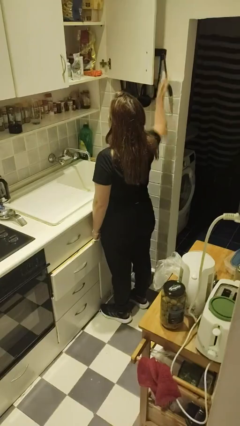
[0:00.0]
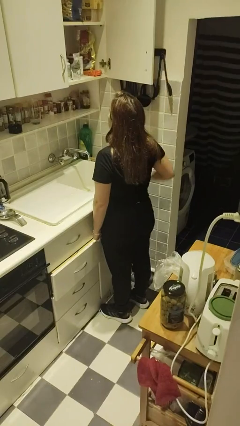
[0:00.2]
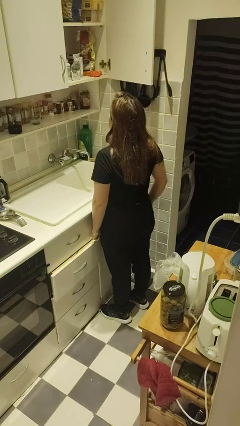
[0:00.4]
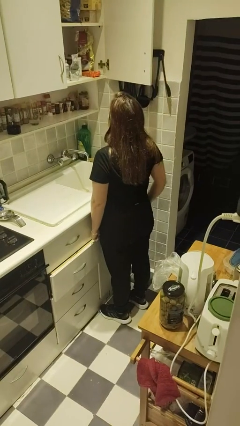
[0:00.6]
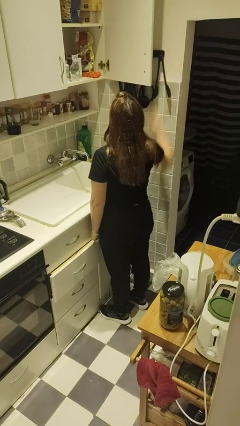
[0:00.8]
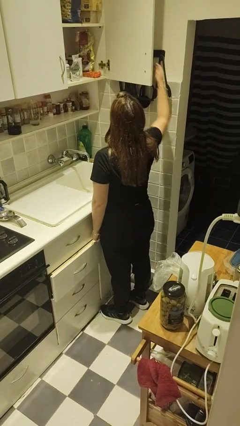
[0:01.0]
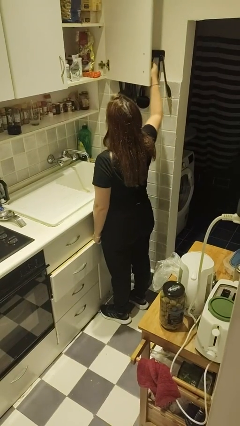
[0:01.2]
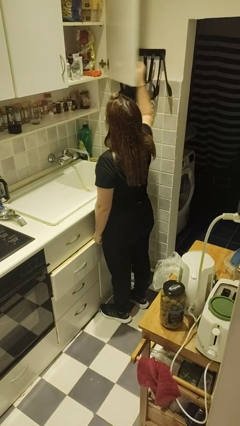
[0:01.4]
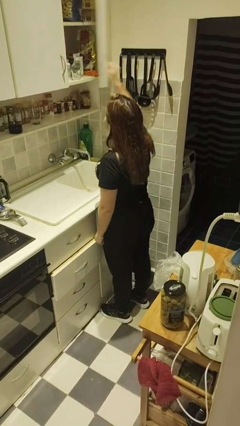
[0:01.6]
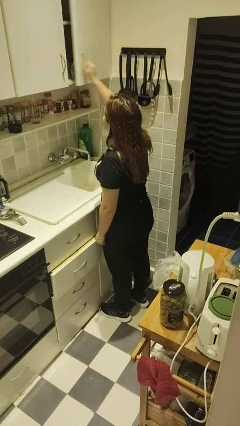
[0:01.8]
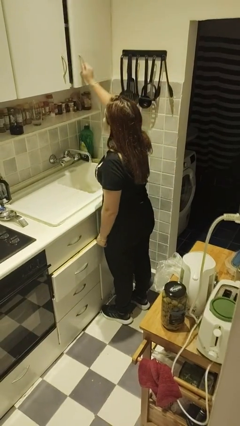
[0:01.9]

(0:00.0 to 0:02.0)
person closes cabinet

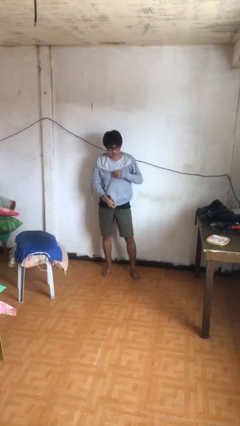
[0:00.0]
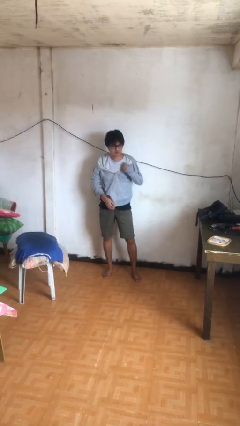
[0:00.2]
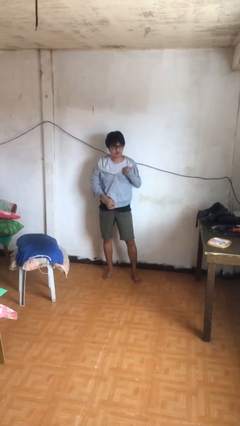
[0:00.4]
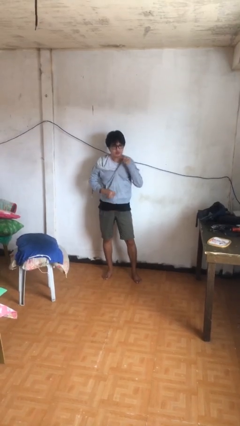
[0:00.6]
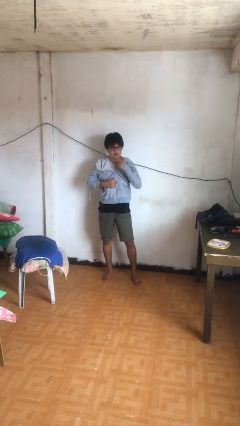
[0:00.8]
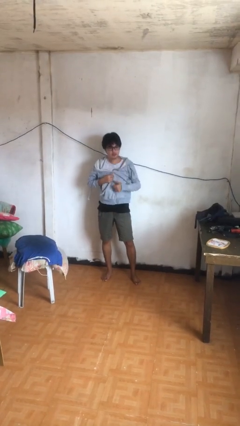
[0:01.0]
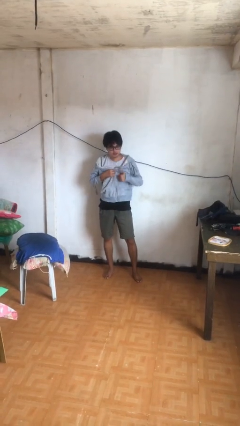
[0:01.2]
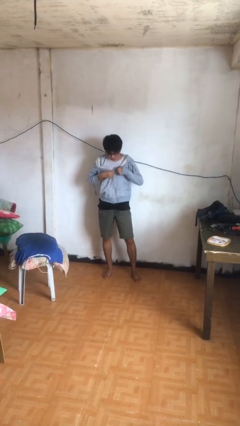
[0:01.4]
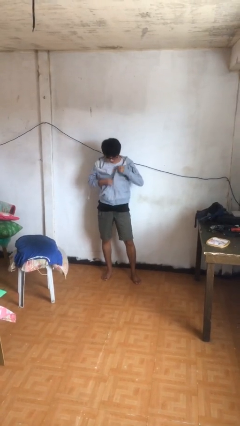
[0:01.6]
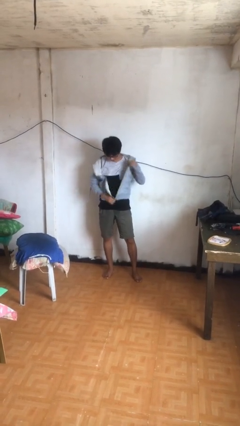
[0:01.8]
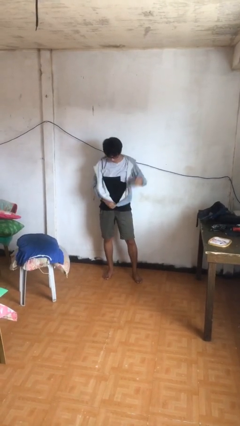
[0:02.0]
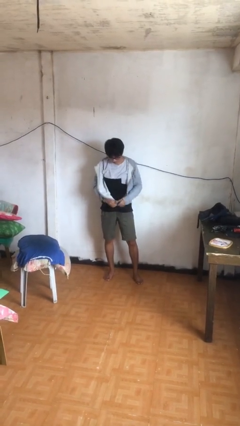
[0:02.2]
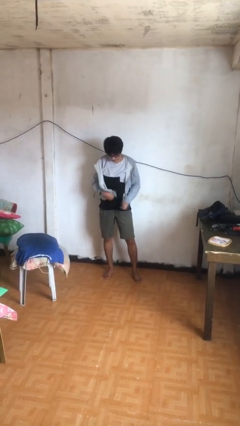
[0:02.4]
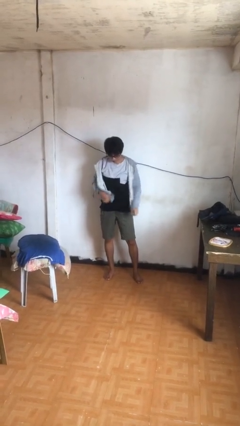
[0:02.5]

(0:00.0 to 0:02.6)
person unzips jacket

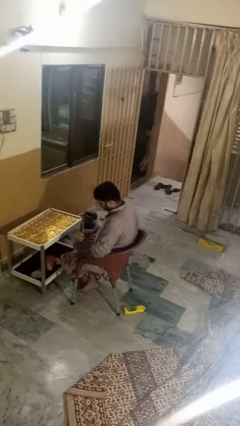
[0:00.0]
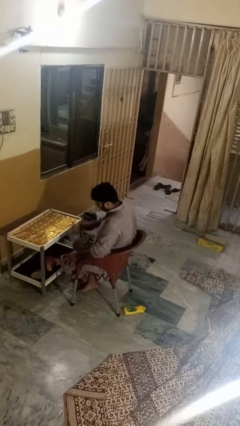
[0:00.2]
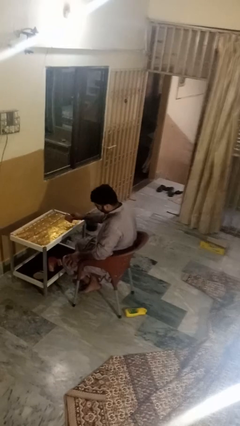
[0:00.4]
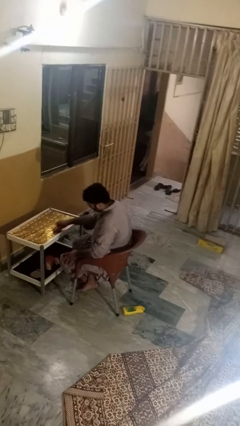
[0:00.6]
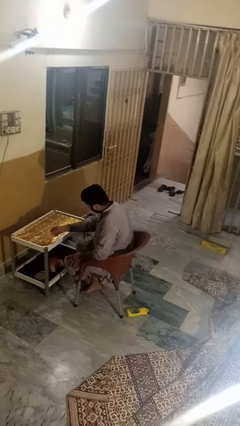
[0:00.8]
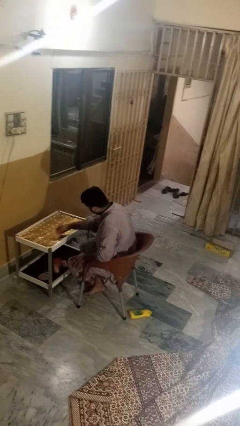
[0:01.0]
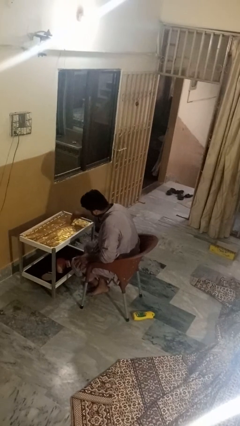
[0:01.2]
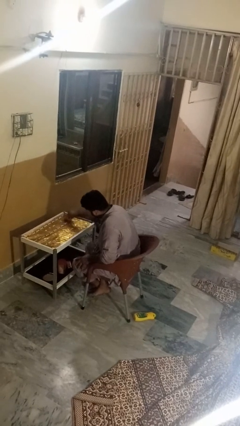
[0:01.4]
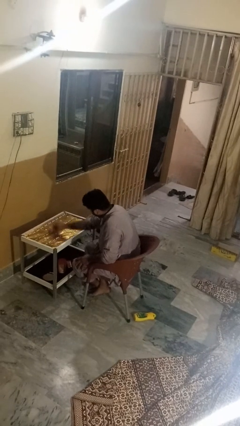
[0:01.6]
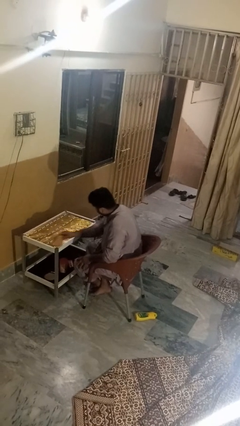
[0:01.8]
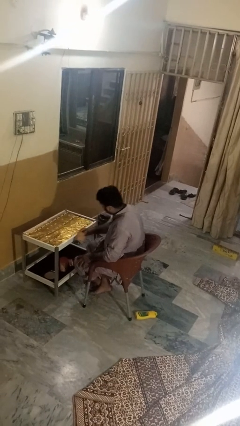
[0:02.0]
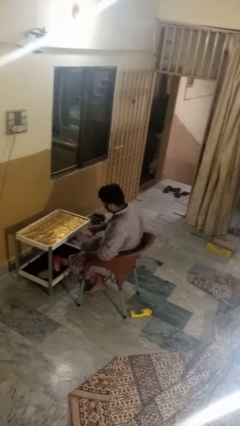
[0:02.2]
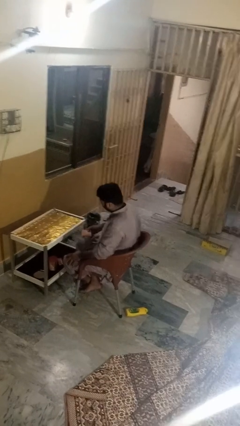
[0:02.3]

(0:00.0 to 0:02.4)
person cleans table with rag

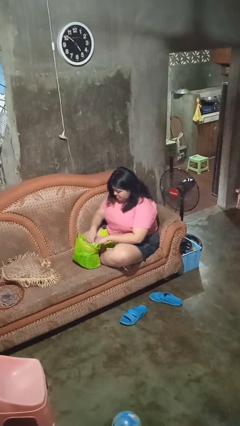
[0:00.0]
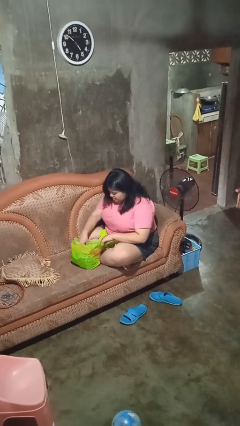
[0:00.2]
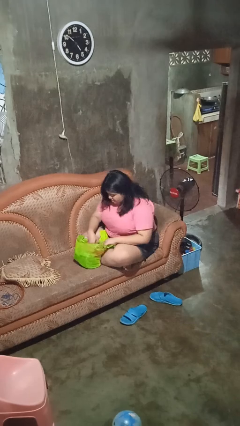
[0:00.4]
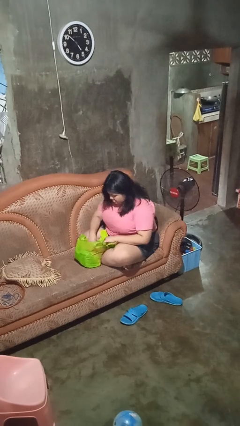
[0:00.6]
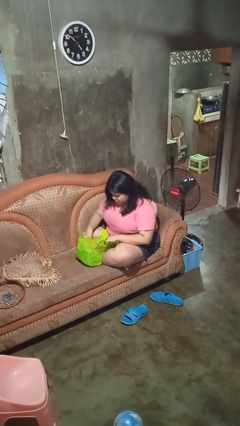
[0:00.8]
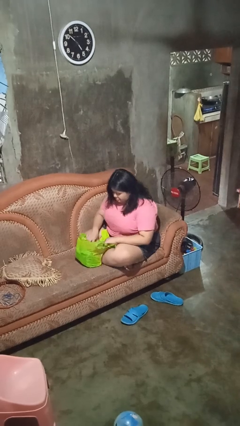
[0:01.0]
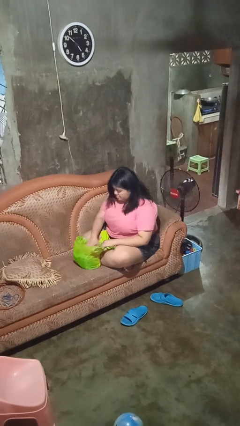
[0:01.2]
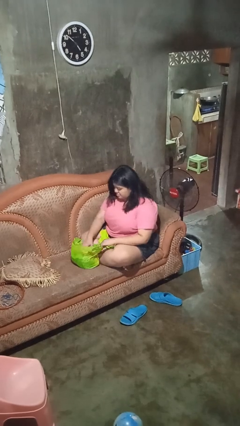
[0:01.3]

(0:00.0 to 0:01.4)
person searches in bag

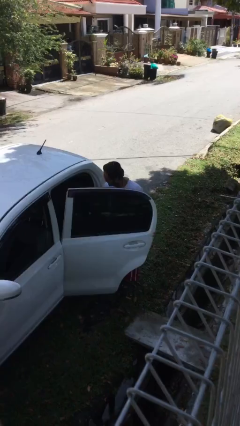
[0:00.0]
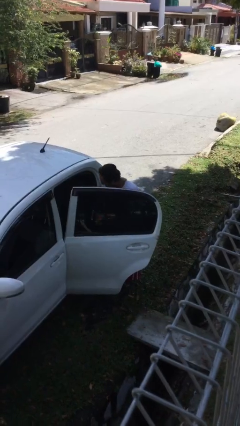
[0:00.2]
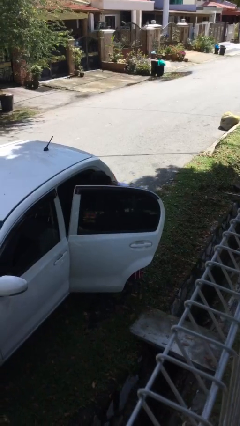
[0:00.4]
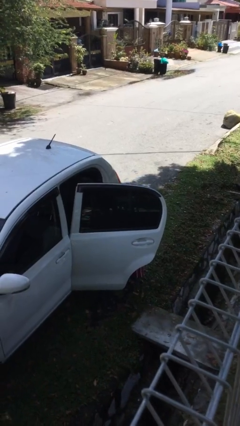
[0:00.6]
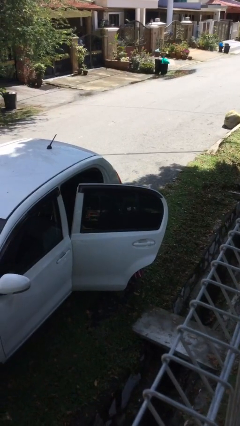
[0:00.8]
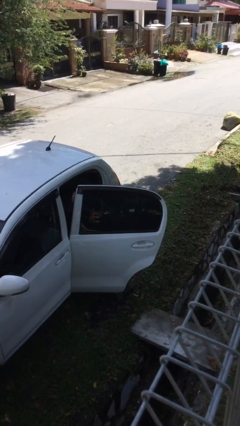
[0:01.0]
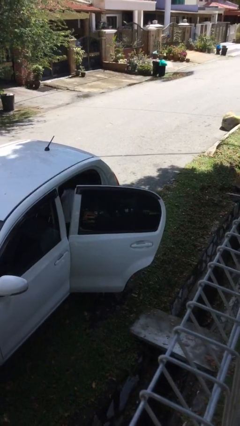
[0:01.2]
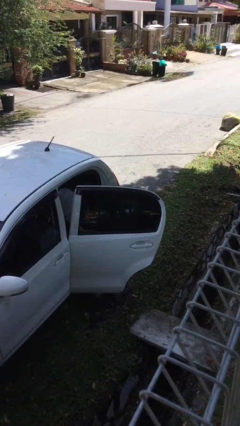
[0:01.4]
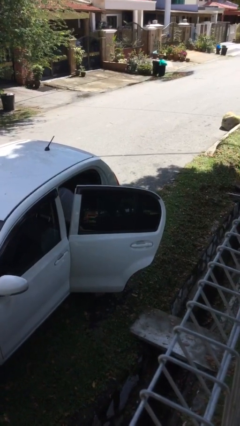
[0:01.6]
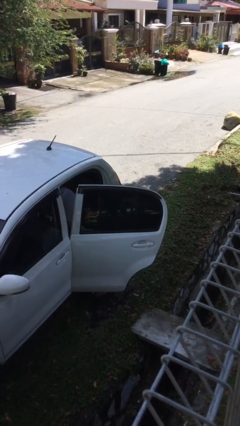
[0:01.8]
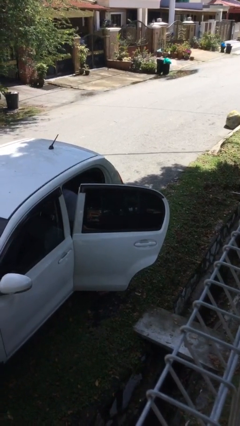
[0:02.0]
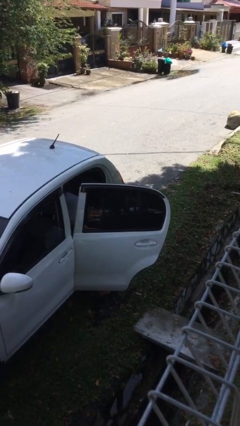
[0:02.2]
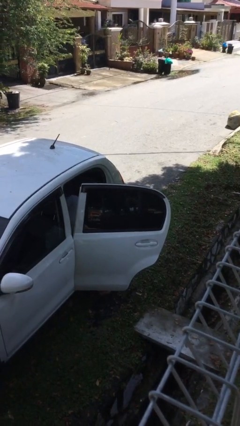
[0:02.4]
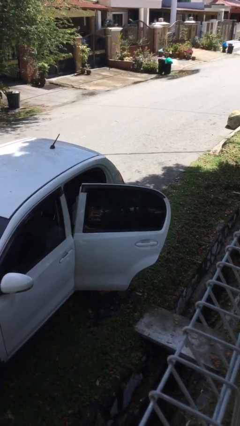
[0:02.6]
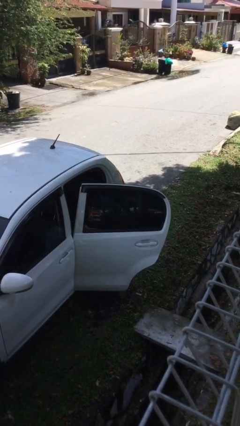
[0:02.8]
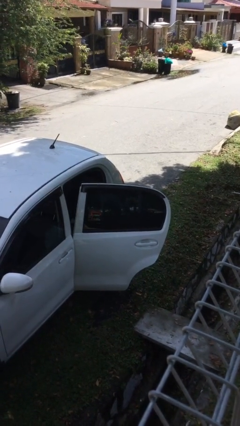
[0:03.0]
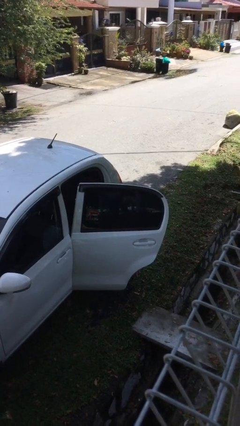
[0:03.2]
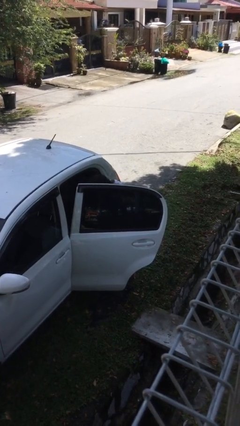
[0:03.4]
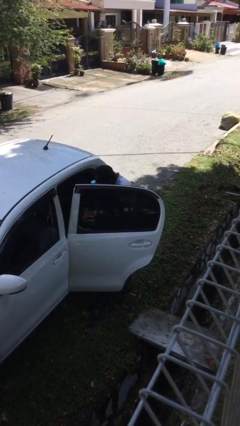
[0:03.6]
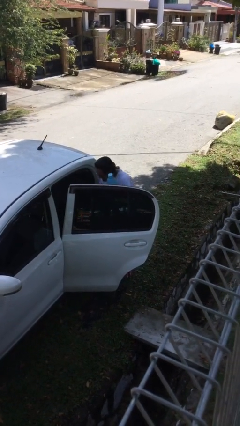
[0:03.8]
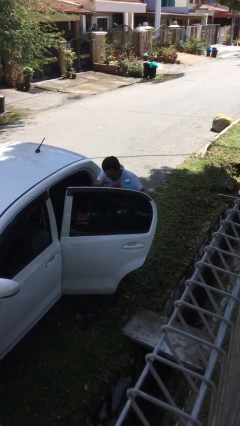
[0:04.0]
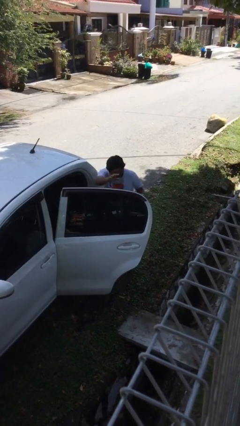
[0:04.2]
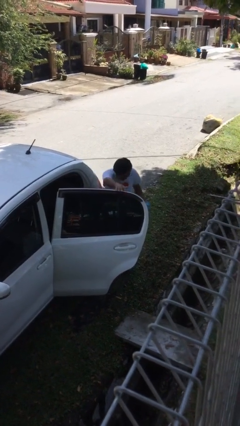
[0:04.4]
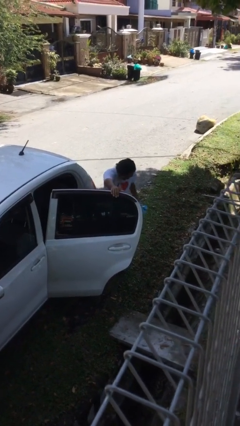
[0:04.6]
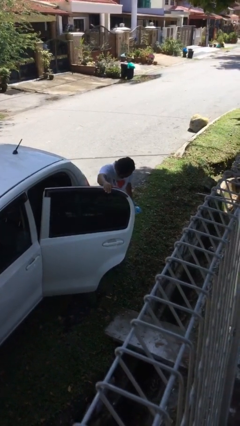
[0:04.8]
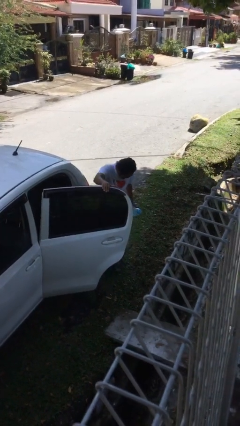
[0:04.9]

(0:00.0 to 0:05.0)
person unloads car

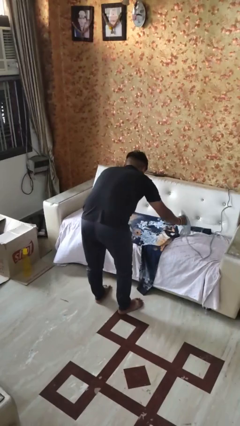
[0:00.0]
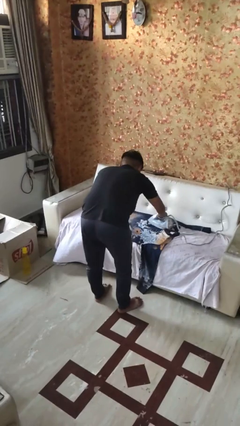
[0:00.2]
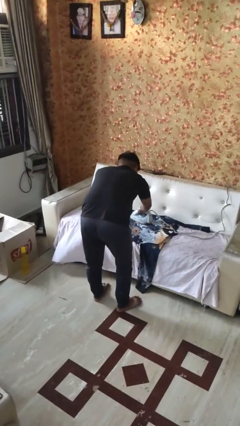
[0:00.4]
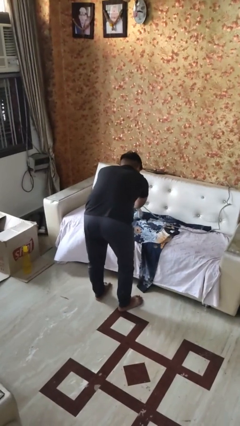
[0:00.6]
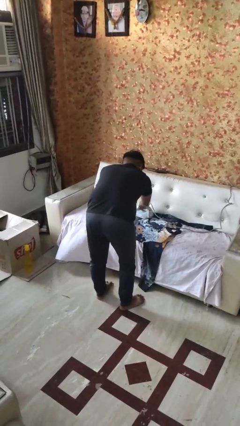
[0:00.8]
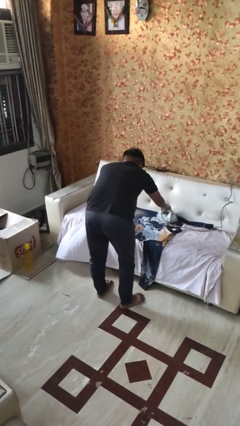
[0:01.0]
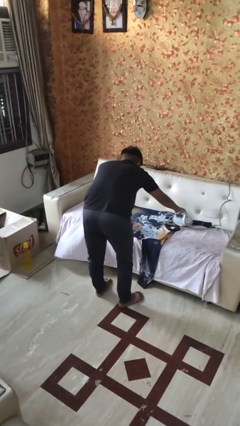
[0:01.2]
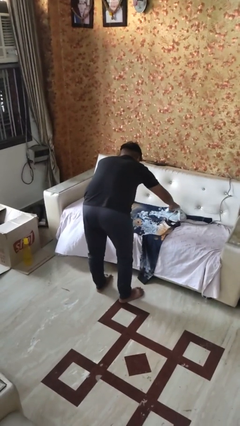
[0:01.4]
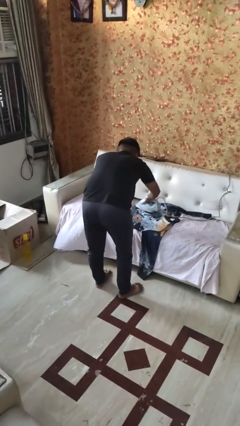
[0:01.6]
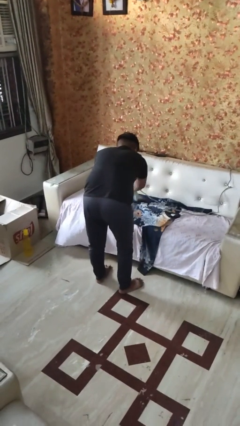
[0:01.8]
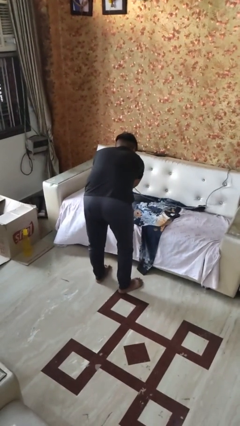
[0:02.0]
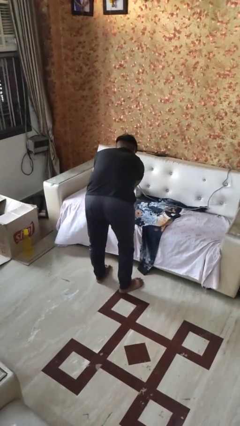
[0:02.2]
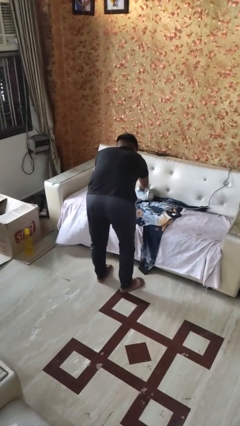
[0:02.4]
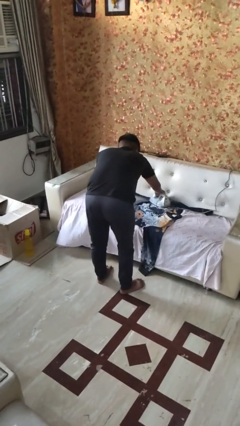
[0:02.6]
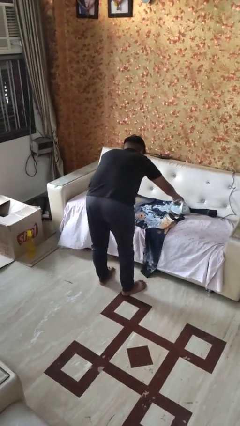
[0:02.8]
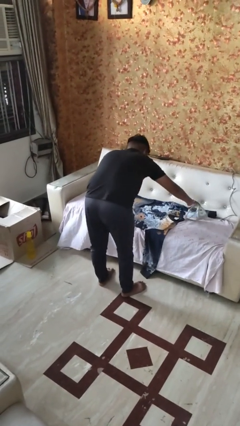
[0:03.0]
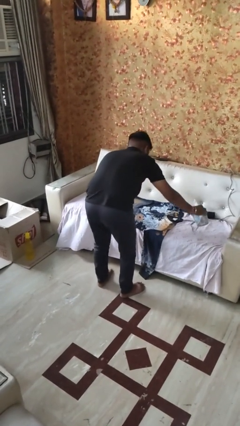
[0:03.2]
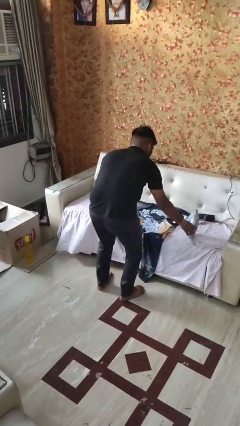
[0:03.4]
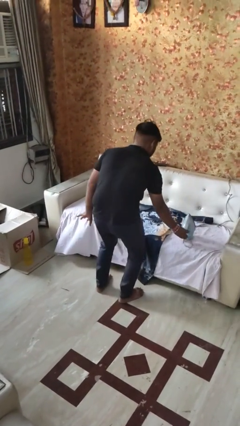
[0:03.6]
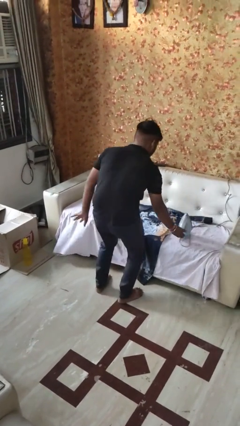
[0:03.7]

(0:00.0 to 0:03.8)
person irons clothes

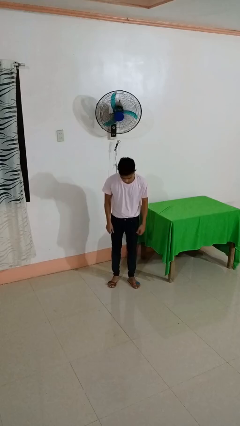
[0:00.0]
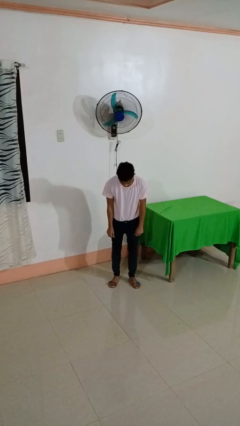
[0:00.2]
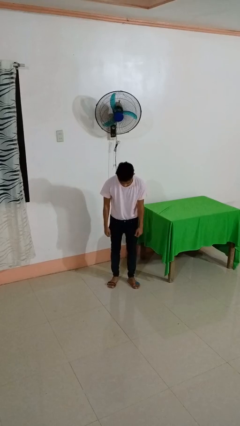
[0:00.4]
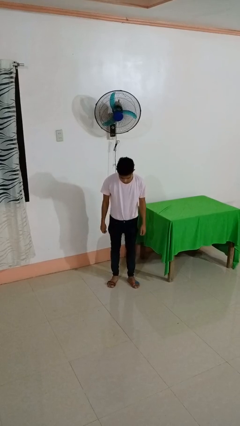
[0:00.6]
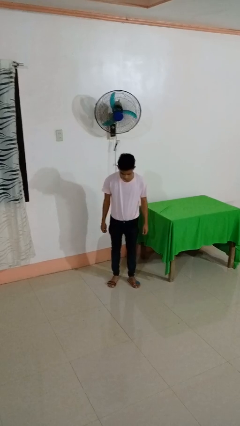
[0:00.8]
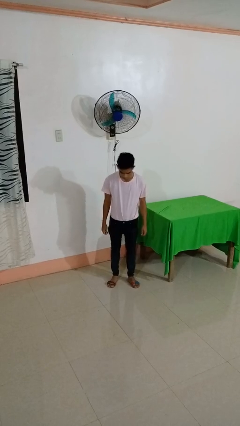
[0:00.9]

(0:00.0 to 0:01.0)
person hikes up pants
